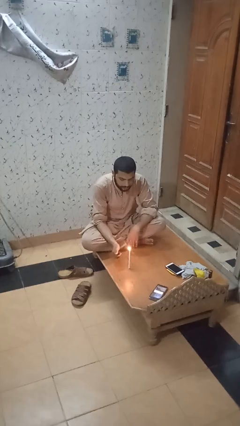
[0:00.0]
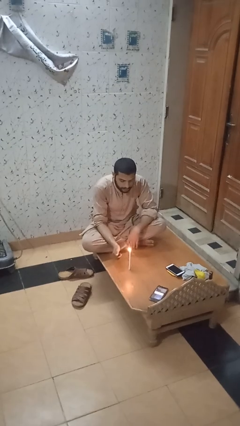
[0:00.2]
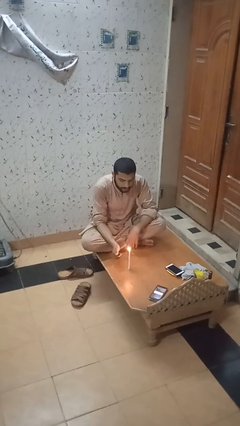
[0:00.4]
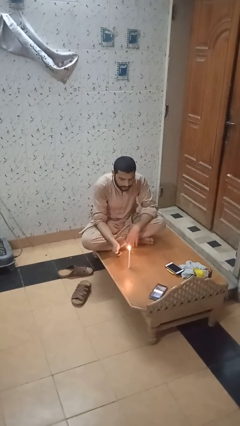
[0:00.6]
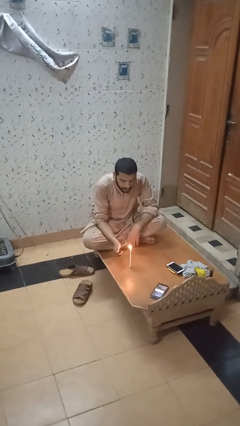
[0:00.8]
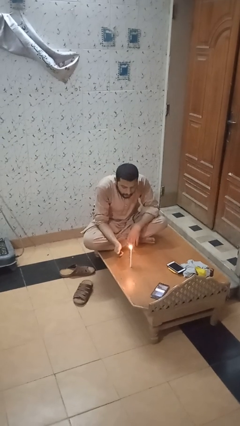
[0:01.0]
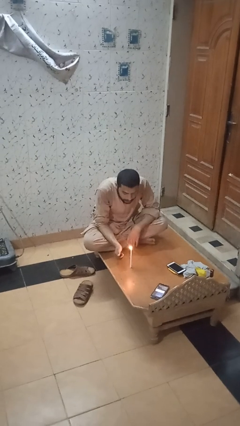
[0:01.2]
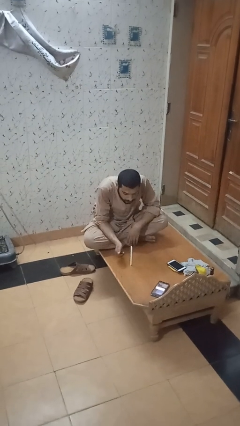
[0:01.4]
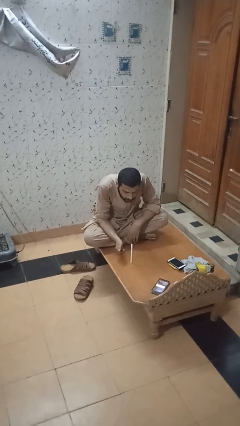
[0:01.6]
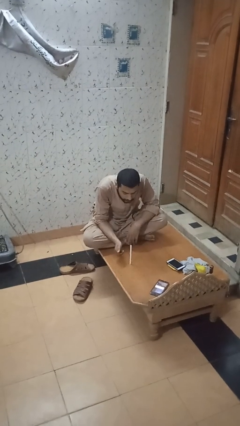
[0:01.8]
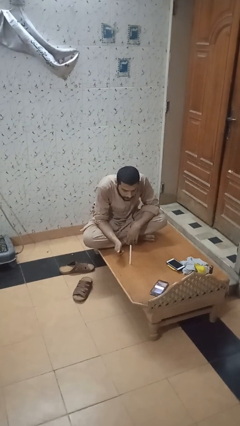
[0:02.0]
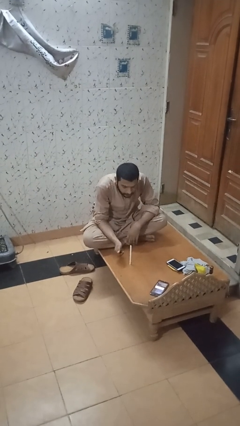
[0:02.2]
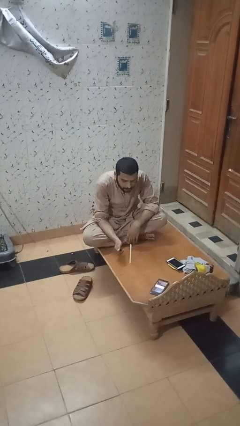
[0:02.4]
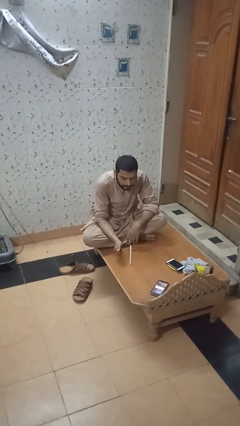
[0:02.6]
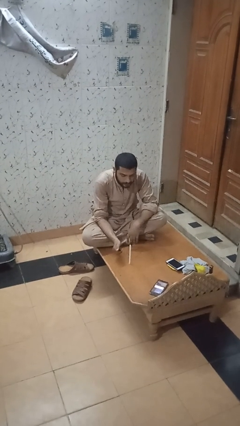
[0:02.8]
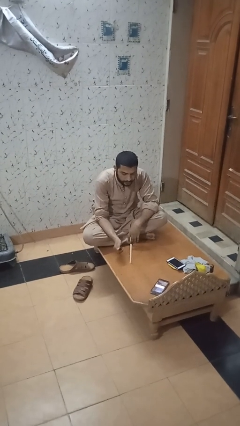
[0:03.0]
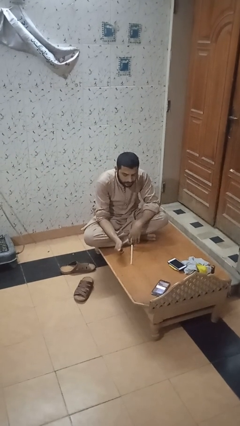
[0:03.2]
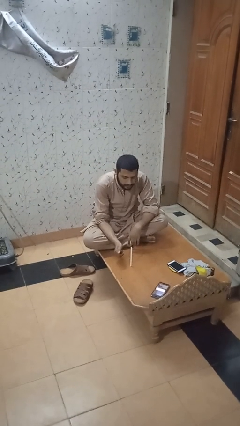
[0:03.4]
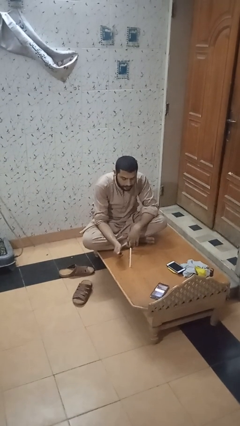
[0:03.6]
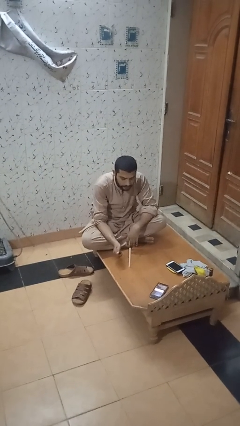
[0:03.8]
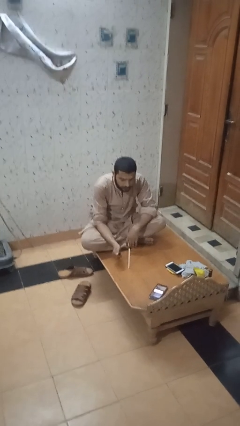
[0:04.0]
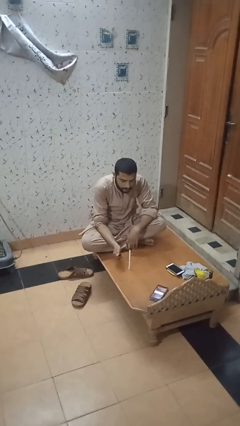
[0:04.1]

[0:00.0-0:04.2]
person extinguishes candle

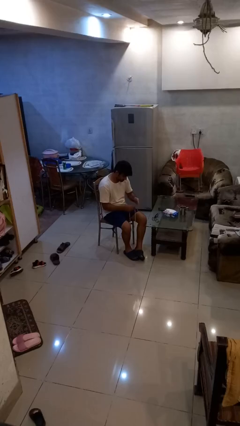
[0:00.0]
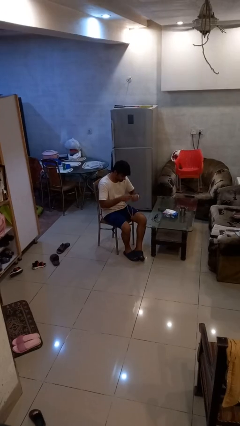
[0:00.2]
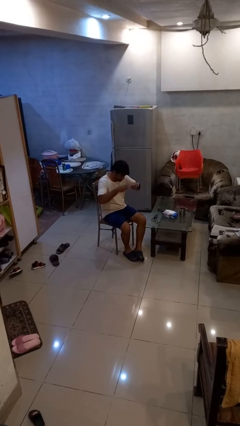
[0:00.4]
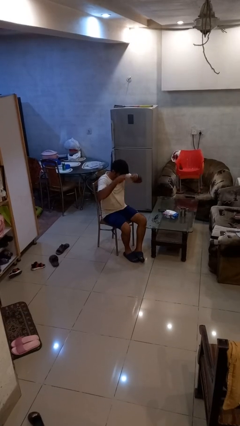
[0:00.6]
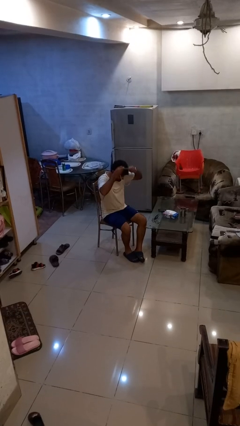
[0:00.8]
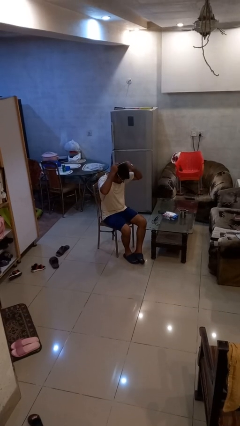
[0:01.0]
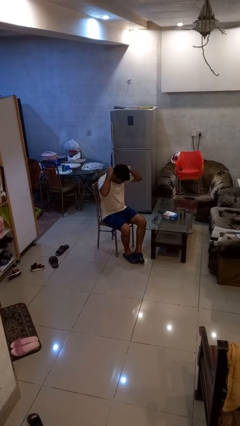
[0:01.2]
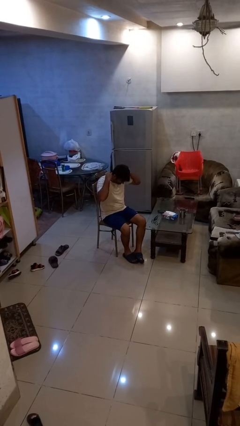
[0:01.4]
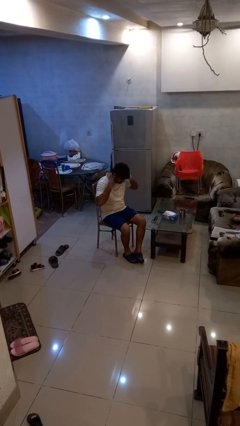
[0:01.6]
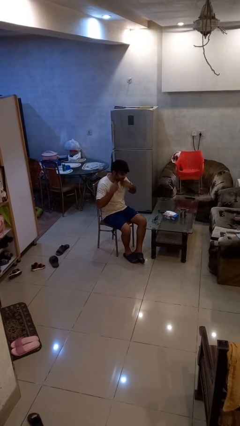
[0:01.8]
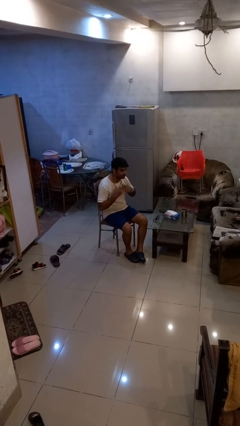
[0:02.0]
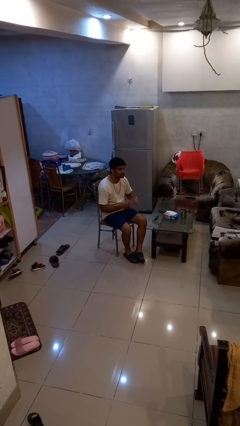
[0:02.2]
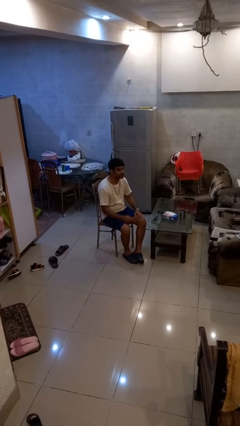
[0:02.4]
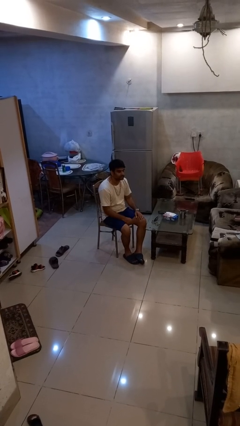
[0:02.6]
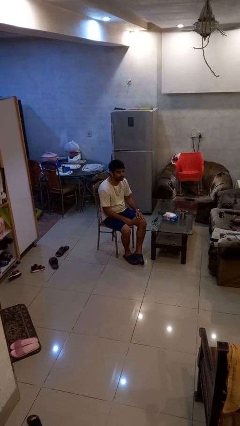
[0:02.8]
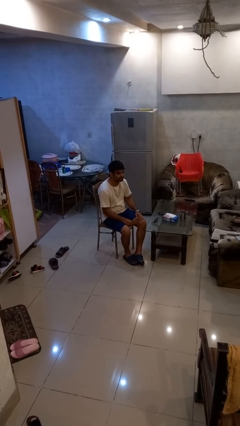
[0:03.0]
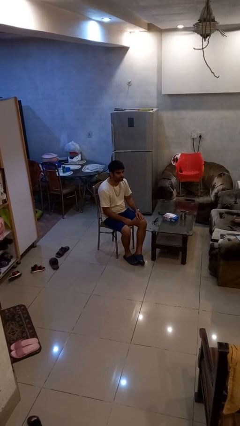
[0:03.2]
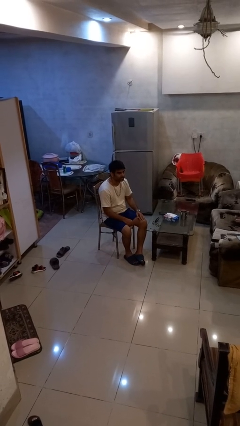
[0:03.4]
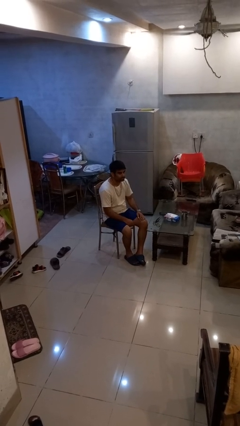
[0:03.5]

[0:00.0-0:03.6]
person puts on necklace

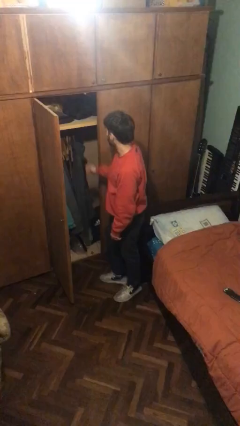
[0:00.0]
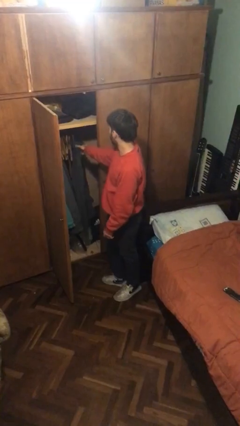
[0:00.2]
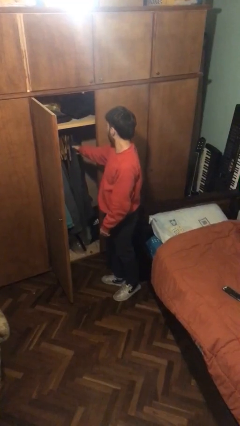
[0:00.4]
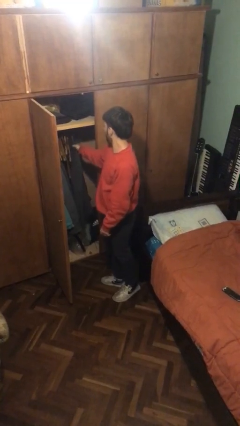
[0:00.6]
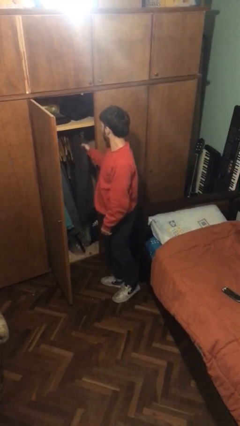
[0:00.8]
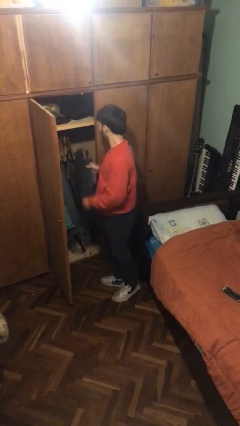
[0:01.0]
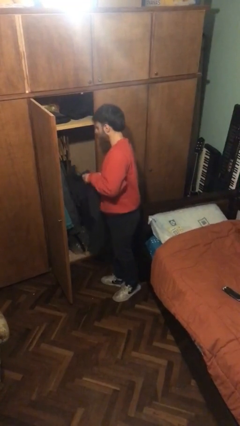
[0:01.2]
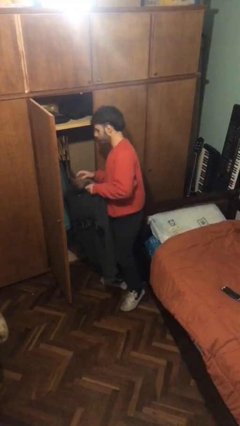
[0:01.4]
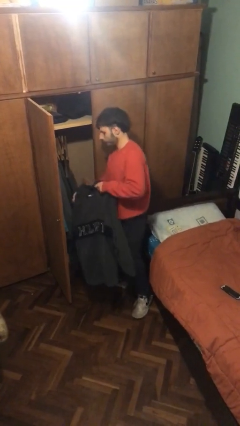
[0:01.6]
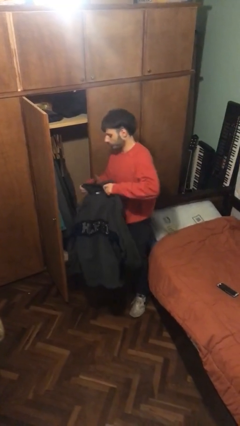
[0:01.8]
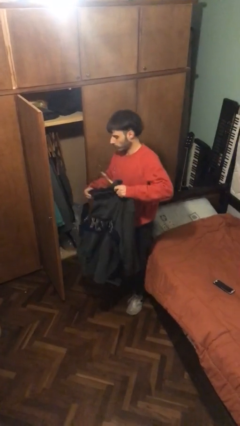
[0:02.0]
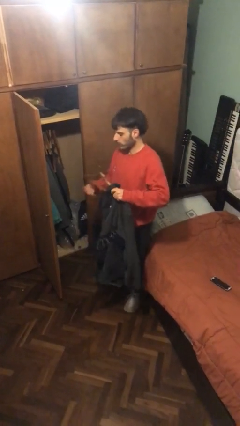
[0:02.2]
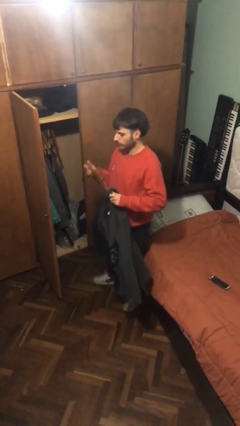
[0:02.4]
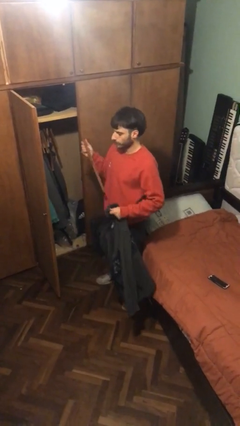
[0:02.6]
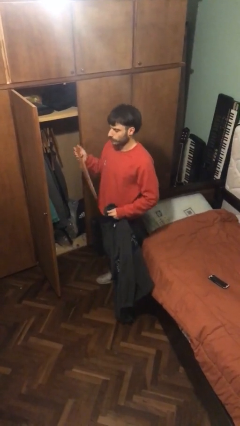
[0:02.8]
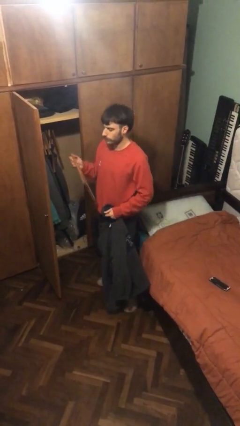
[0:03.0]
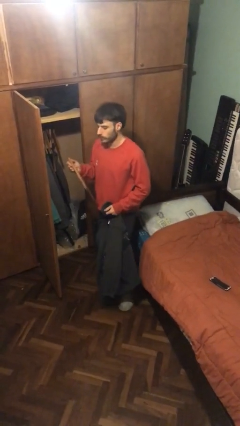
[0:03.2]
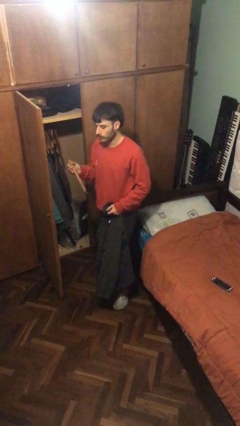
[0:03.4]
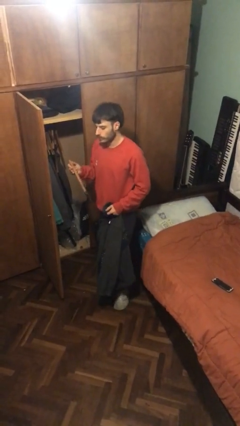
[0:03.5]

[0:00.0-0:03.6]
person takes clothes from closet

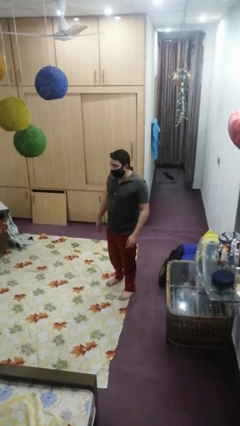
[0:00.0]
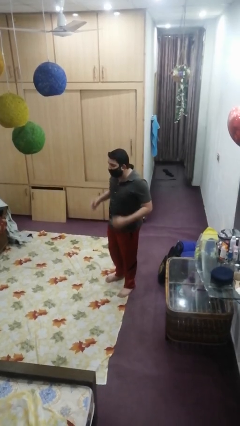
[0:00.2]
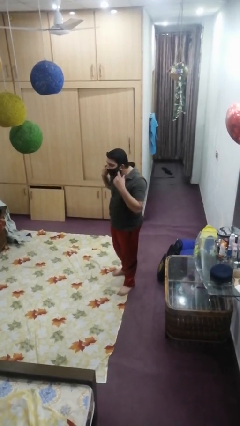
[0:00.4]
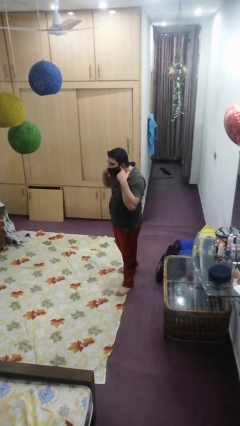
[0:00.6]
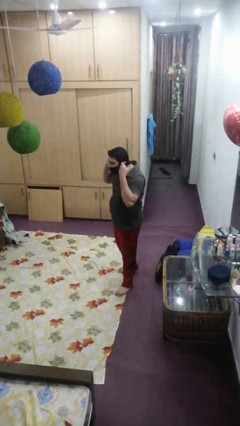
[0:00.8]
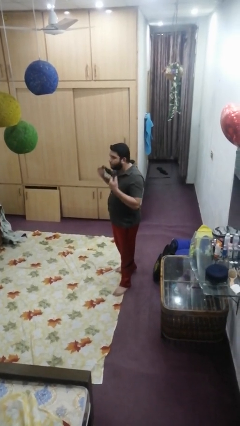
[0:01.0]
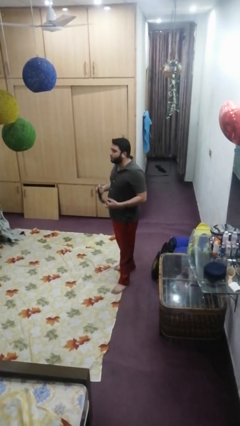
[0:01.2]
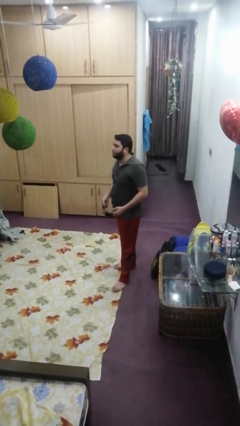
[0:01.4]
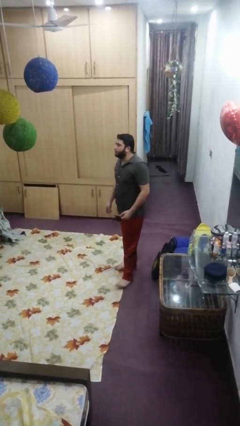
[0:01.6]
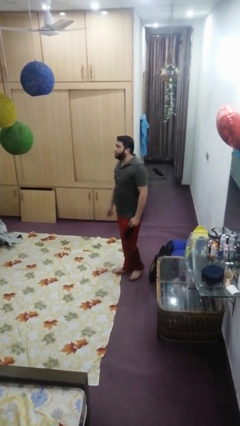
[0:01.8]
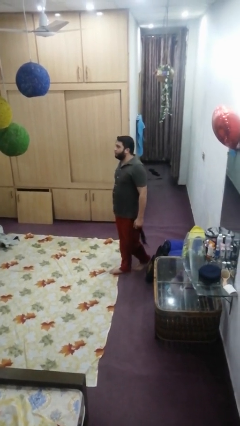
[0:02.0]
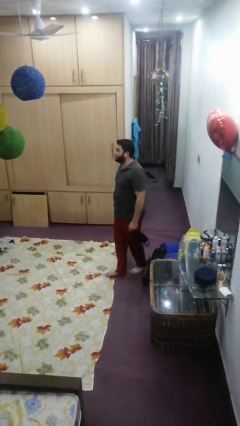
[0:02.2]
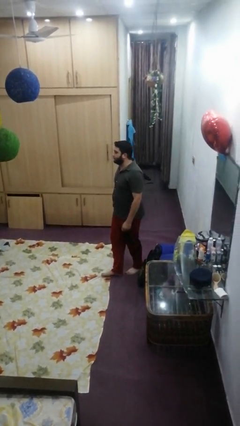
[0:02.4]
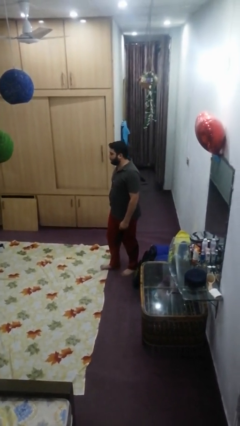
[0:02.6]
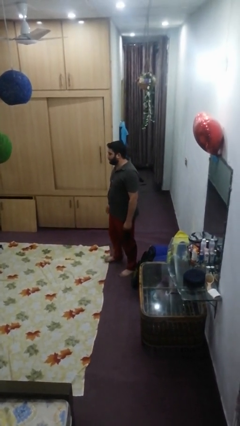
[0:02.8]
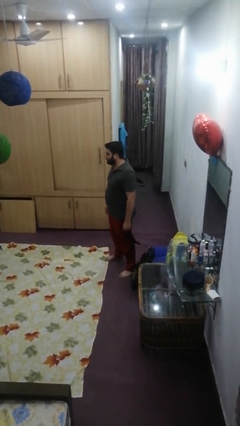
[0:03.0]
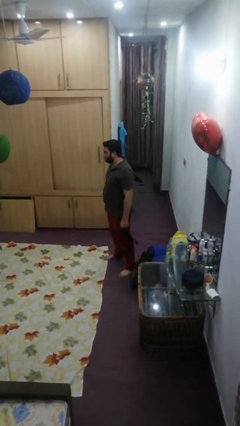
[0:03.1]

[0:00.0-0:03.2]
person takes off facemask

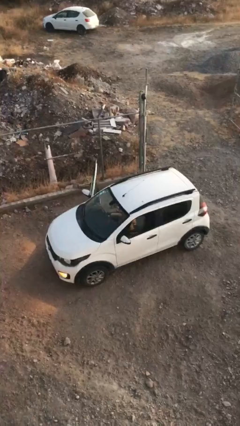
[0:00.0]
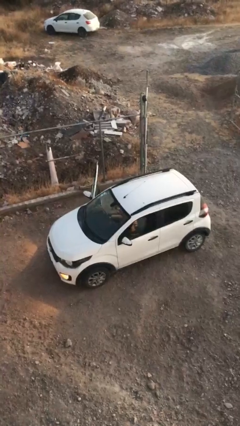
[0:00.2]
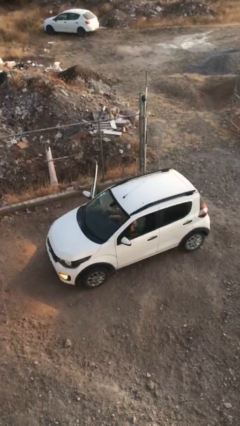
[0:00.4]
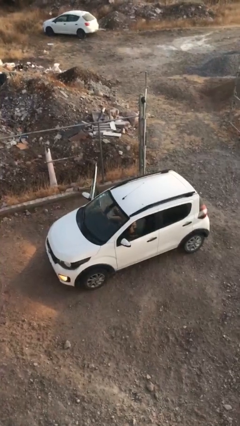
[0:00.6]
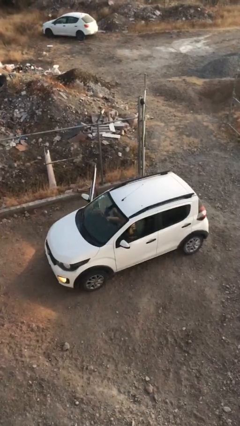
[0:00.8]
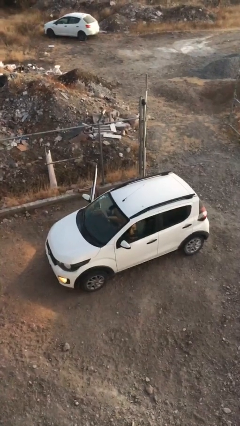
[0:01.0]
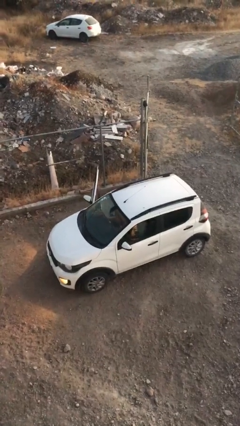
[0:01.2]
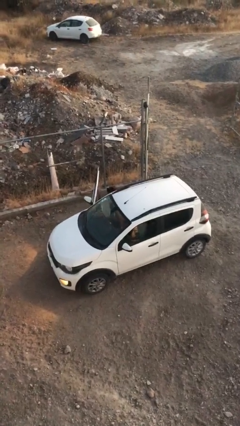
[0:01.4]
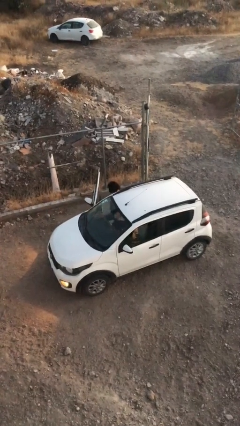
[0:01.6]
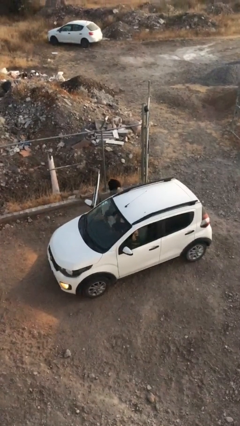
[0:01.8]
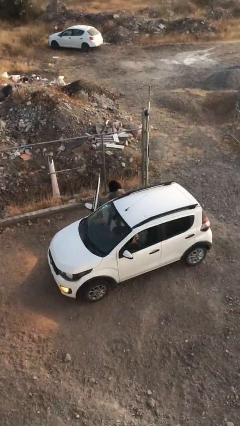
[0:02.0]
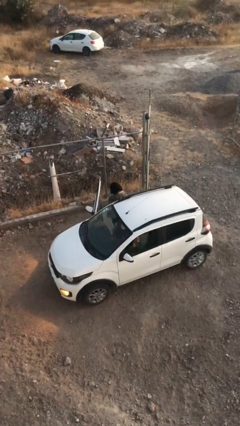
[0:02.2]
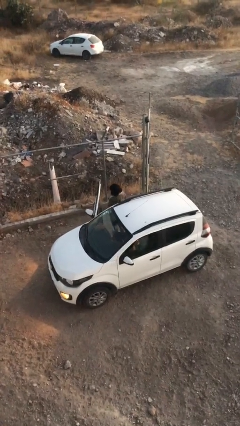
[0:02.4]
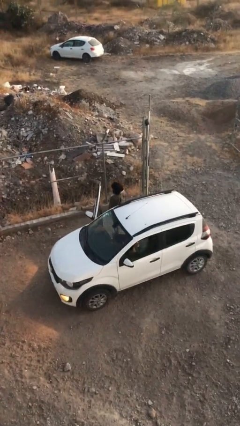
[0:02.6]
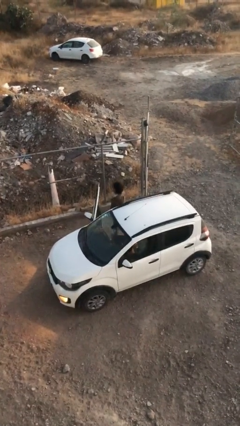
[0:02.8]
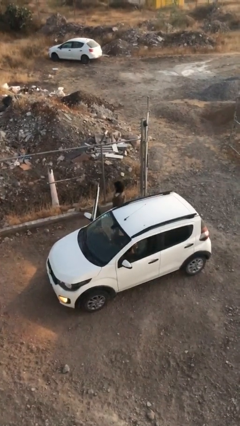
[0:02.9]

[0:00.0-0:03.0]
person exits car
